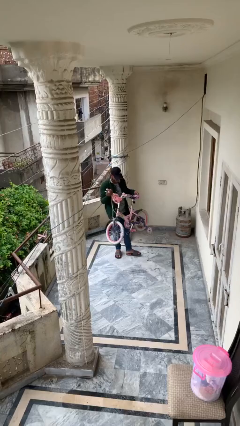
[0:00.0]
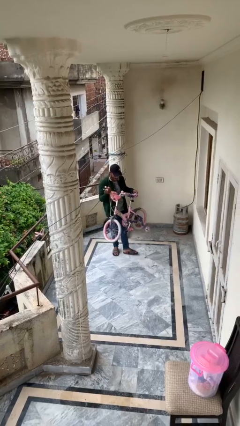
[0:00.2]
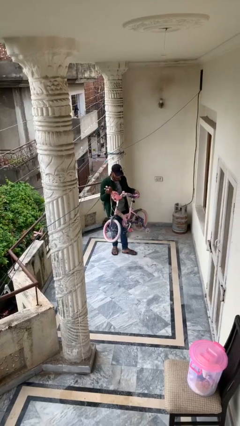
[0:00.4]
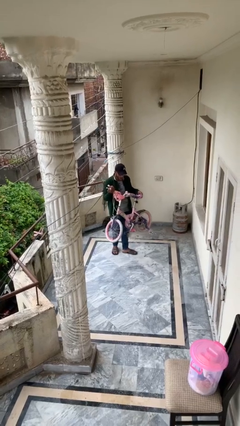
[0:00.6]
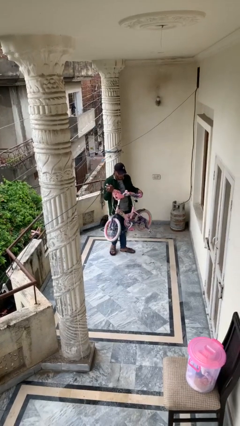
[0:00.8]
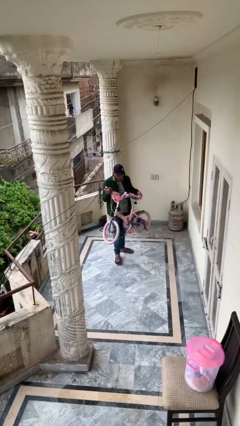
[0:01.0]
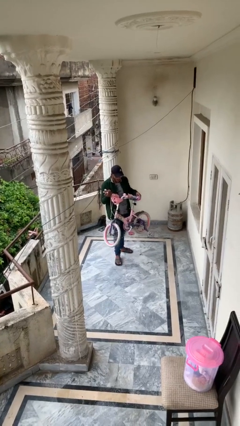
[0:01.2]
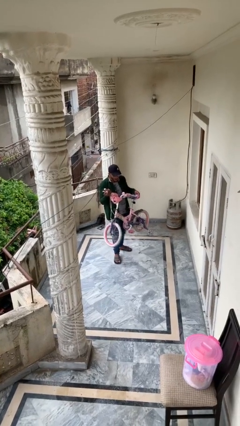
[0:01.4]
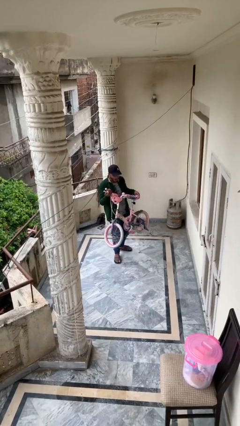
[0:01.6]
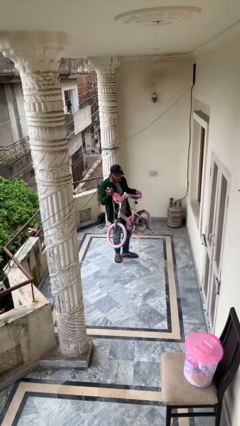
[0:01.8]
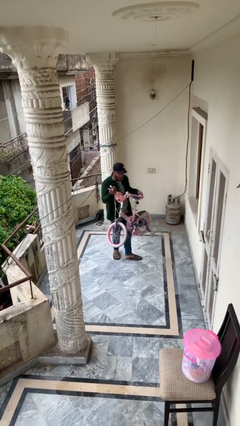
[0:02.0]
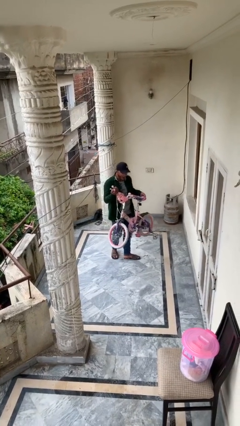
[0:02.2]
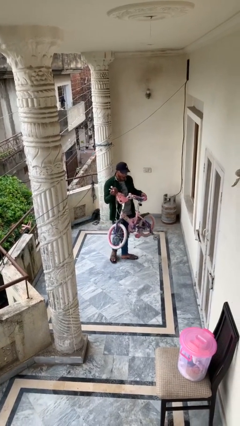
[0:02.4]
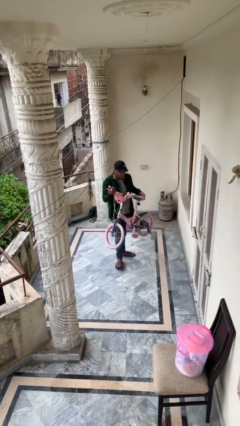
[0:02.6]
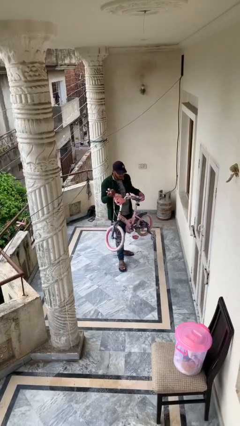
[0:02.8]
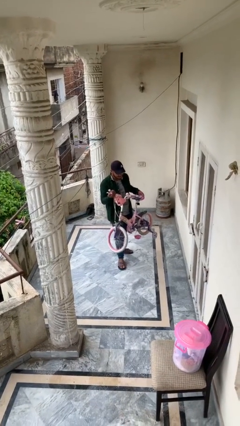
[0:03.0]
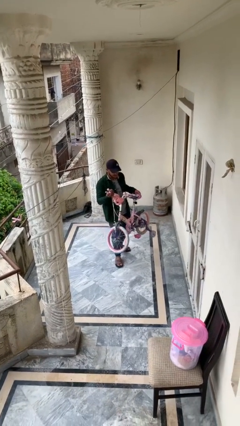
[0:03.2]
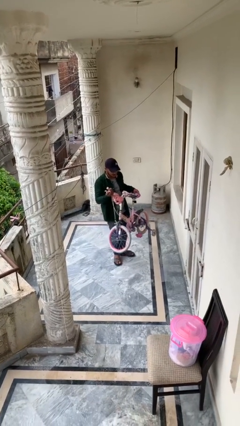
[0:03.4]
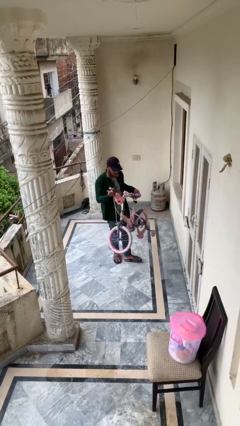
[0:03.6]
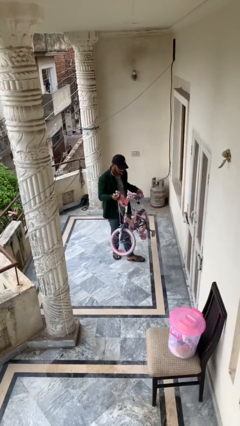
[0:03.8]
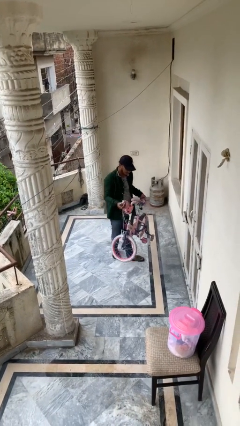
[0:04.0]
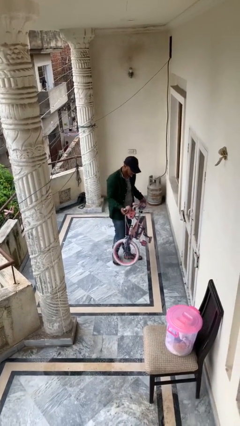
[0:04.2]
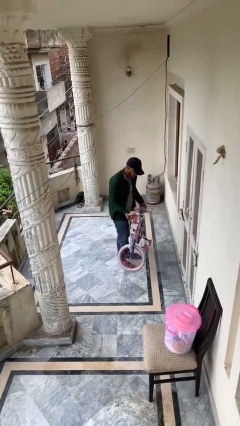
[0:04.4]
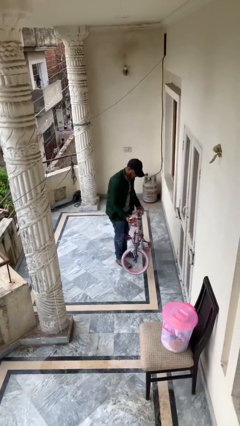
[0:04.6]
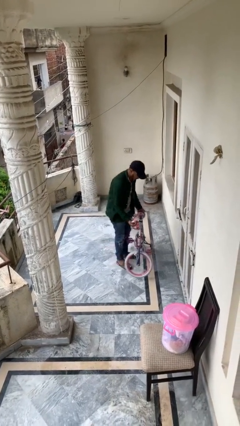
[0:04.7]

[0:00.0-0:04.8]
person carries heavy object

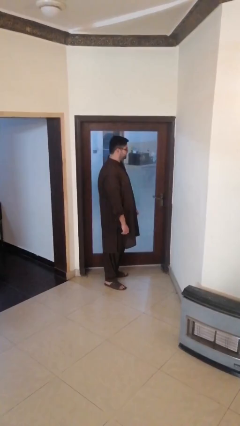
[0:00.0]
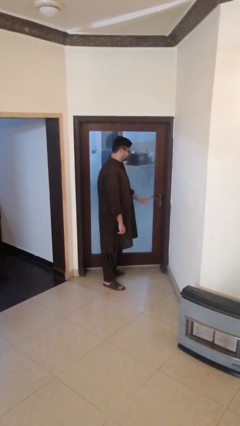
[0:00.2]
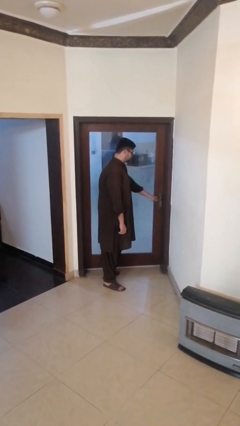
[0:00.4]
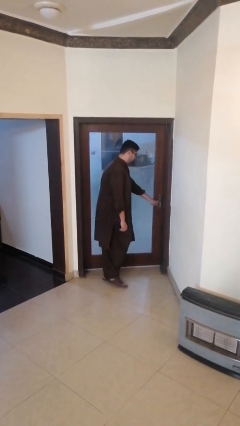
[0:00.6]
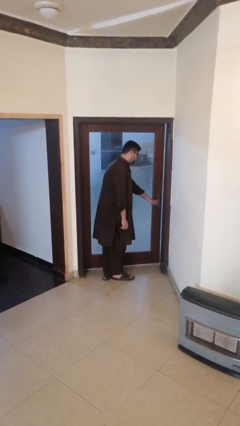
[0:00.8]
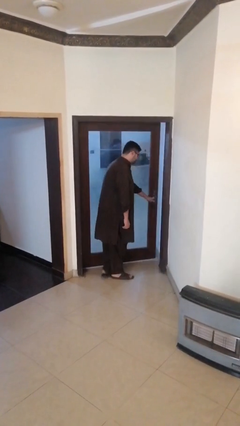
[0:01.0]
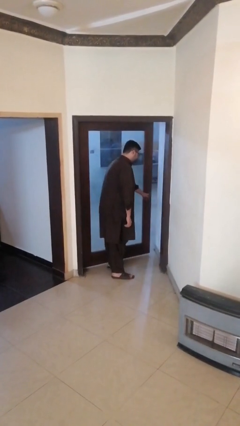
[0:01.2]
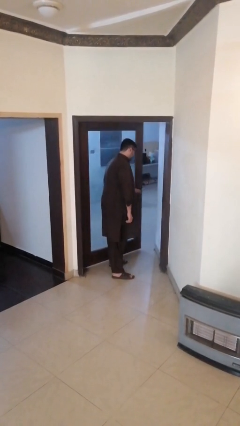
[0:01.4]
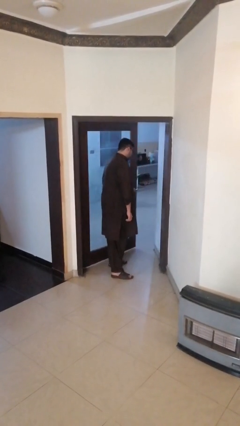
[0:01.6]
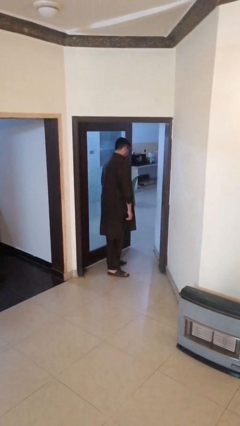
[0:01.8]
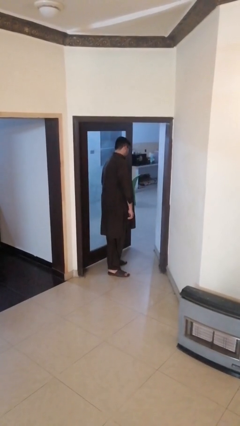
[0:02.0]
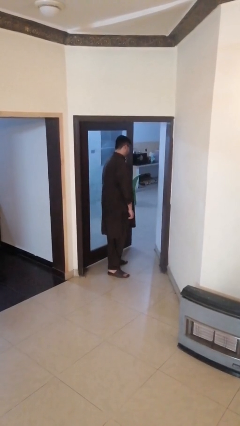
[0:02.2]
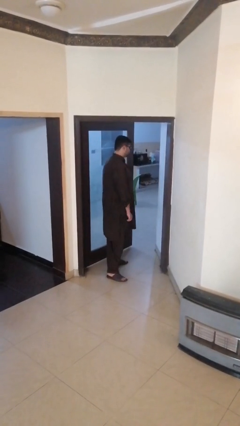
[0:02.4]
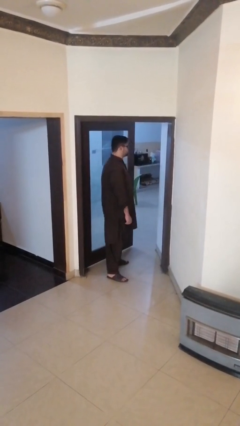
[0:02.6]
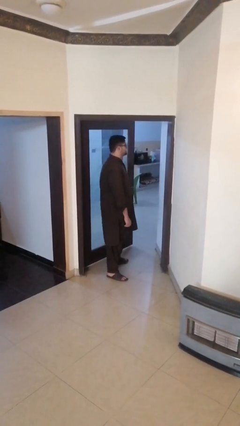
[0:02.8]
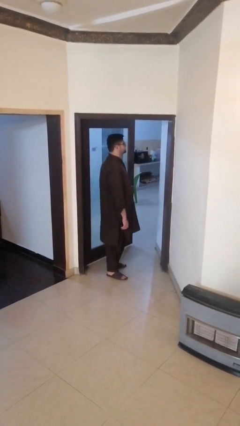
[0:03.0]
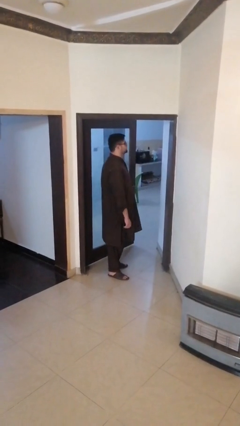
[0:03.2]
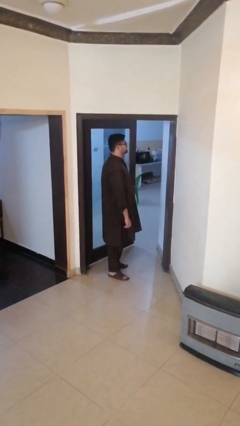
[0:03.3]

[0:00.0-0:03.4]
person opens facility door

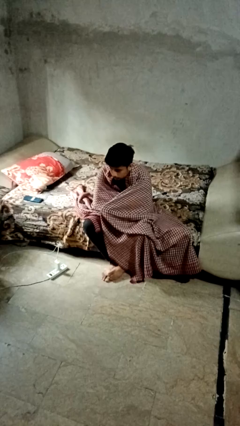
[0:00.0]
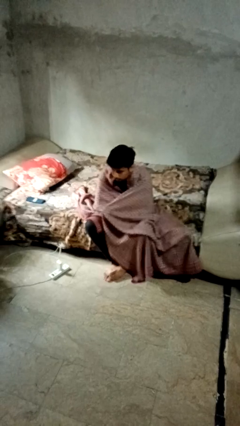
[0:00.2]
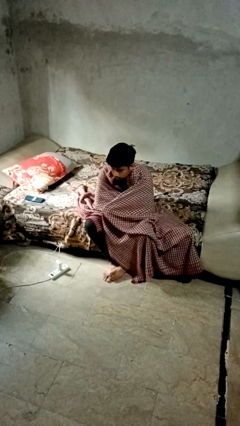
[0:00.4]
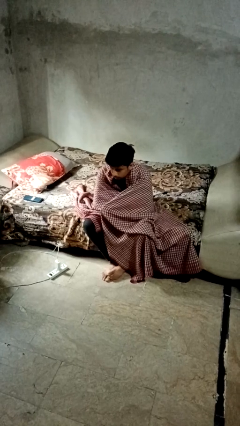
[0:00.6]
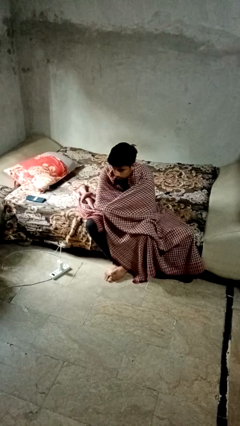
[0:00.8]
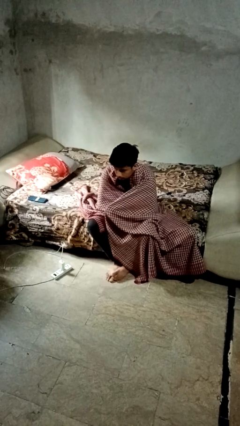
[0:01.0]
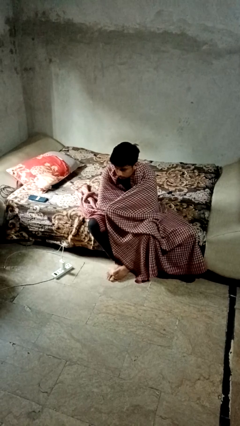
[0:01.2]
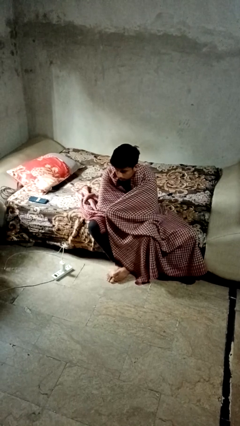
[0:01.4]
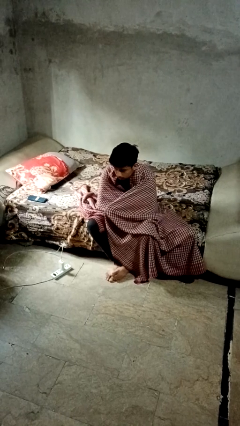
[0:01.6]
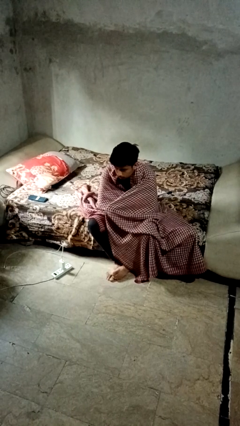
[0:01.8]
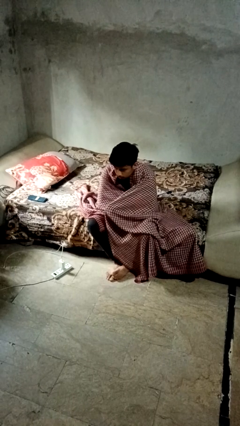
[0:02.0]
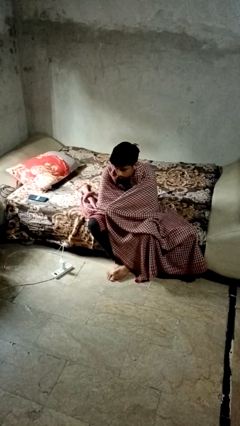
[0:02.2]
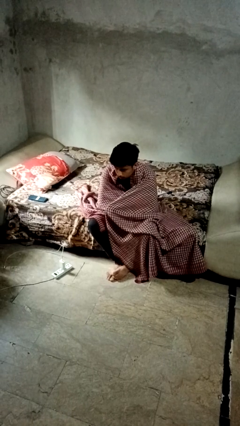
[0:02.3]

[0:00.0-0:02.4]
person covers with blanket

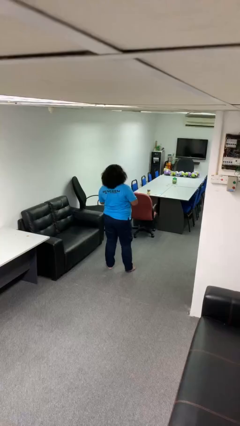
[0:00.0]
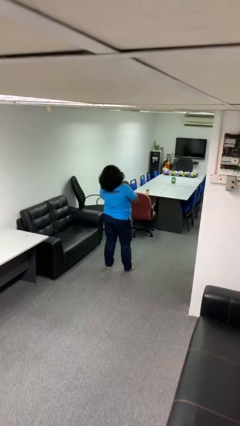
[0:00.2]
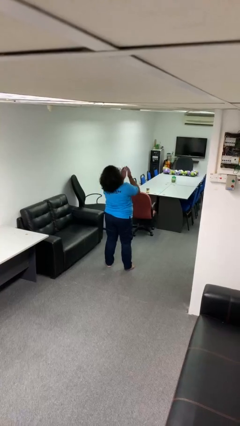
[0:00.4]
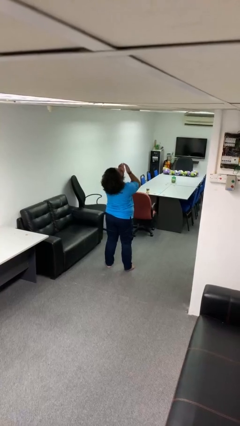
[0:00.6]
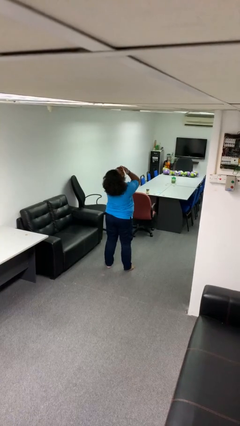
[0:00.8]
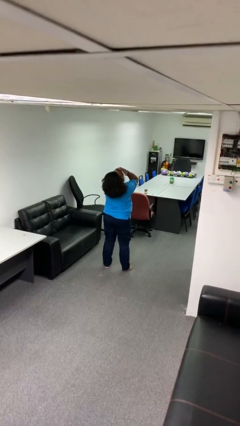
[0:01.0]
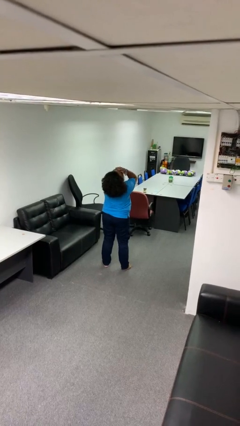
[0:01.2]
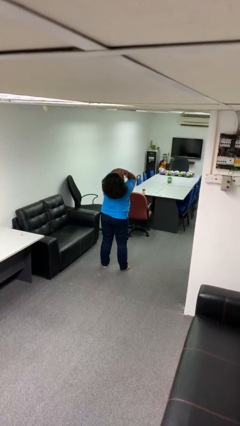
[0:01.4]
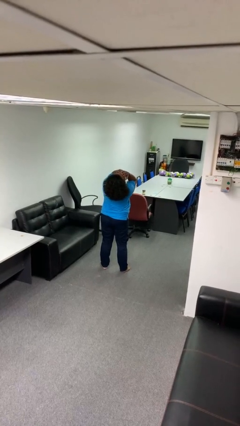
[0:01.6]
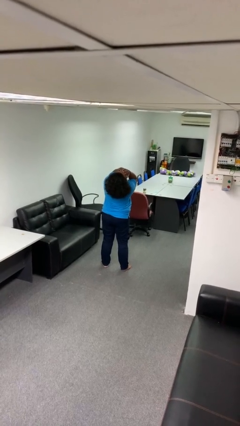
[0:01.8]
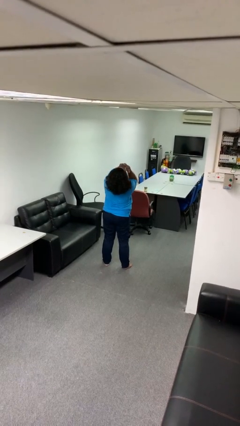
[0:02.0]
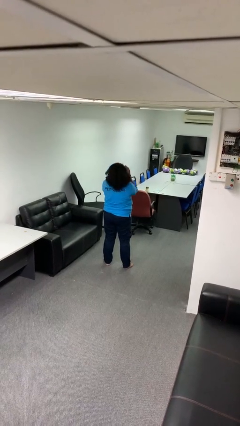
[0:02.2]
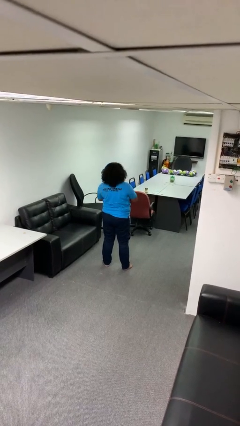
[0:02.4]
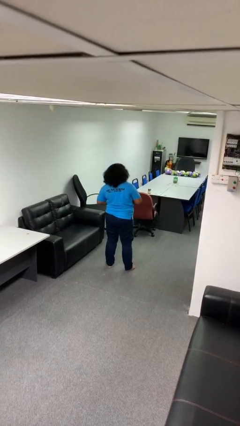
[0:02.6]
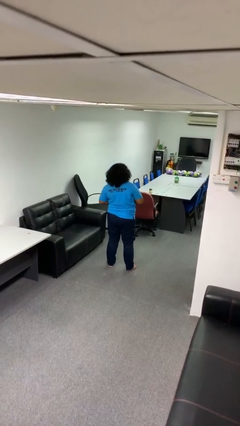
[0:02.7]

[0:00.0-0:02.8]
person covers face with hands

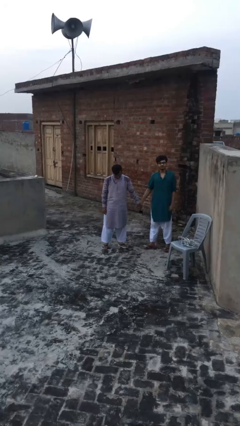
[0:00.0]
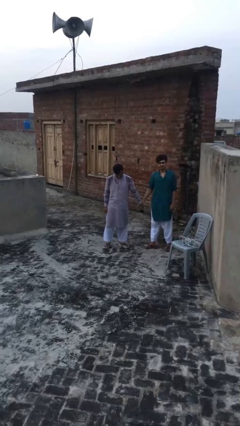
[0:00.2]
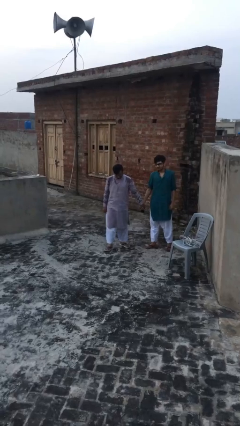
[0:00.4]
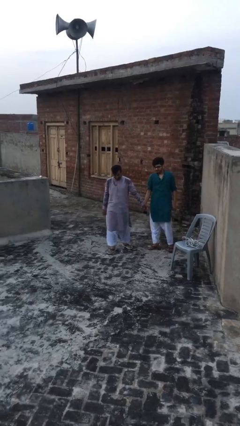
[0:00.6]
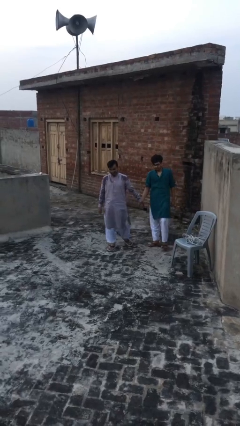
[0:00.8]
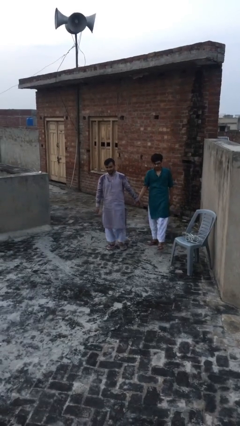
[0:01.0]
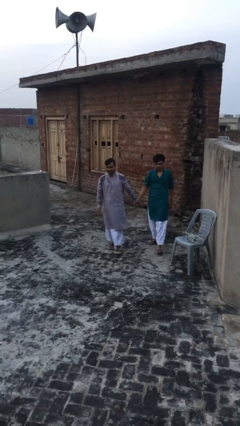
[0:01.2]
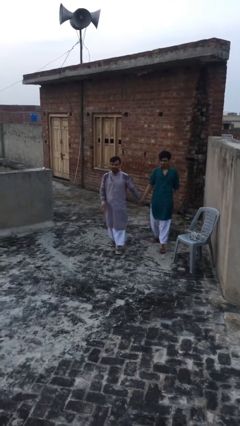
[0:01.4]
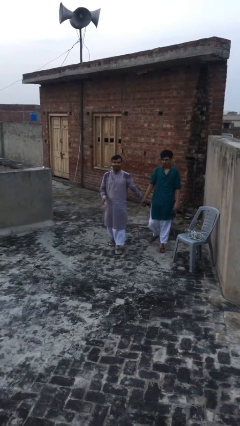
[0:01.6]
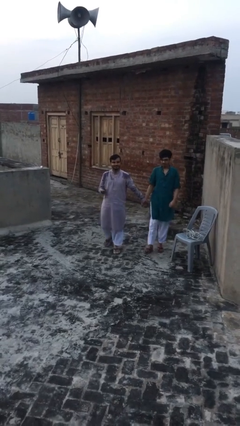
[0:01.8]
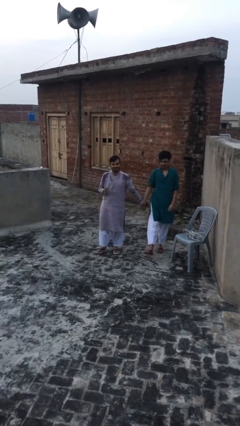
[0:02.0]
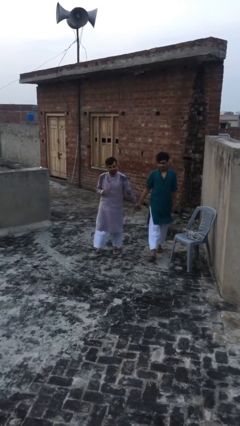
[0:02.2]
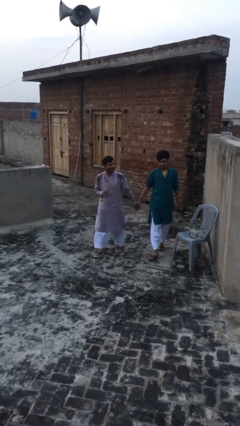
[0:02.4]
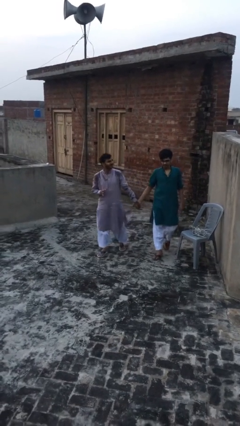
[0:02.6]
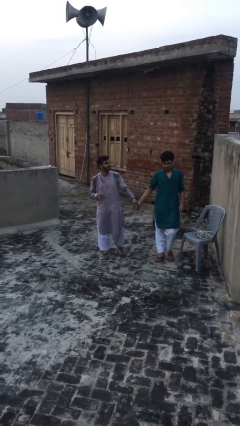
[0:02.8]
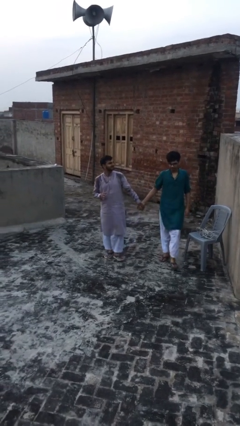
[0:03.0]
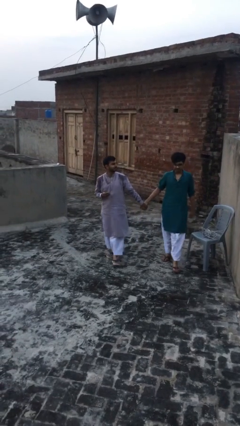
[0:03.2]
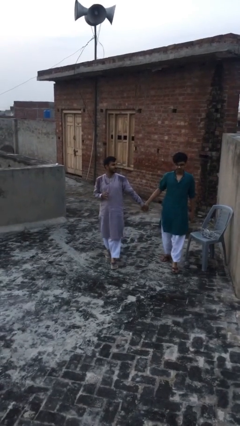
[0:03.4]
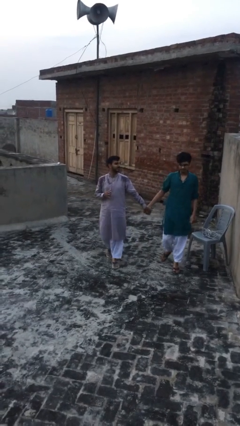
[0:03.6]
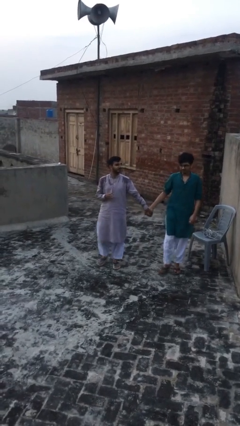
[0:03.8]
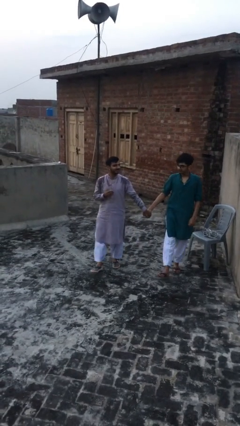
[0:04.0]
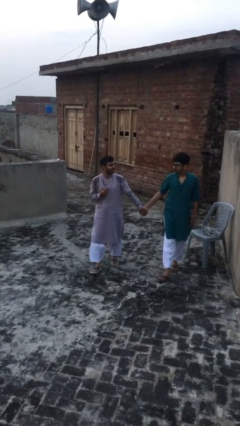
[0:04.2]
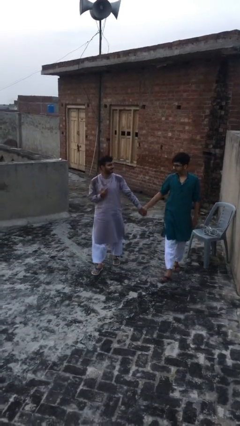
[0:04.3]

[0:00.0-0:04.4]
person holds hand
